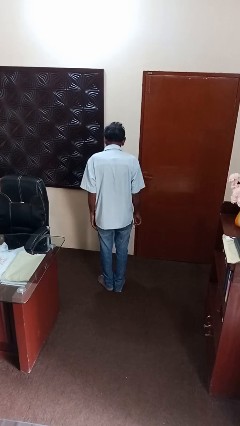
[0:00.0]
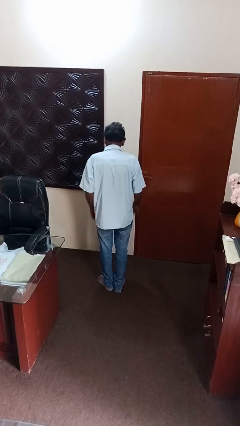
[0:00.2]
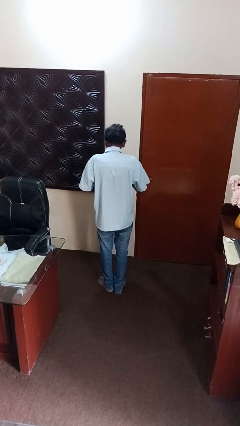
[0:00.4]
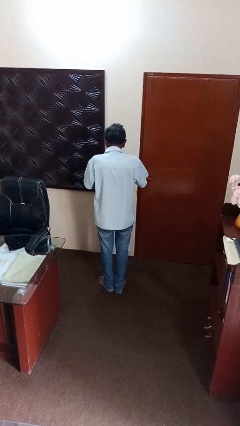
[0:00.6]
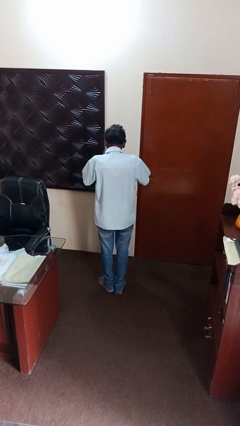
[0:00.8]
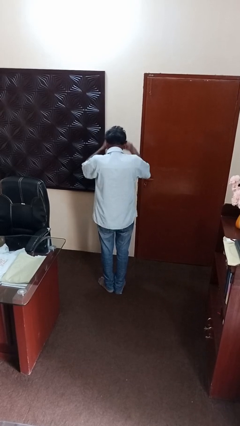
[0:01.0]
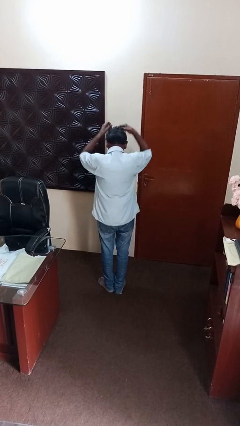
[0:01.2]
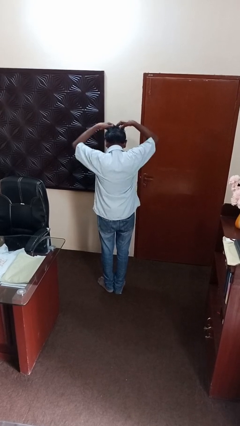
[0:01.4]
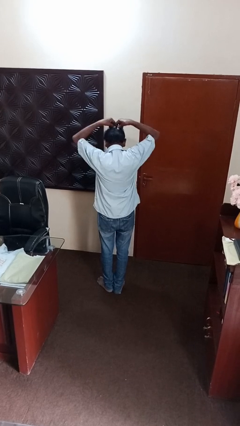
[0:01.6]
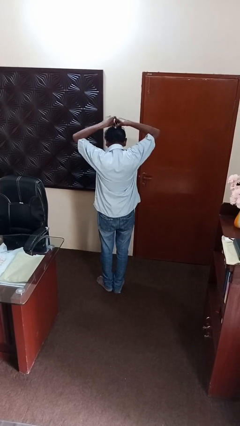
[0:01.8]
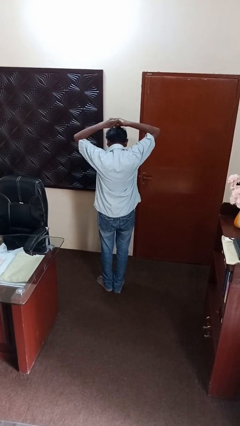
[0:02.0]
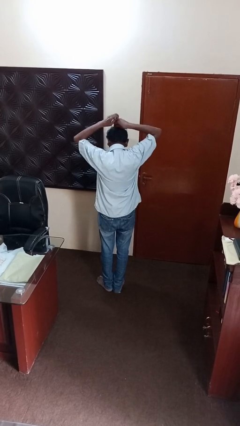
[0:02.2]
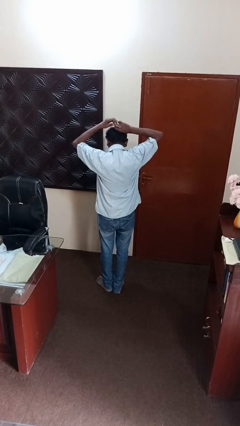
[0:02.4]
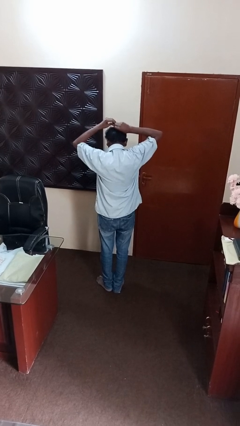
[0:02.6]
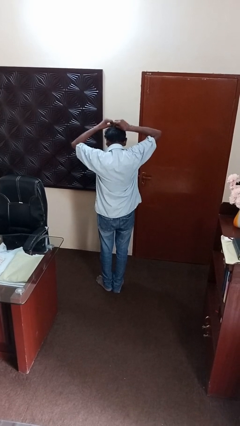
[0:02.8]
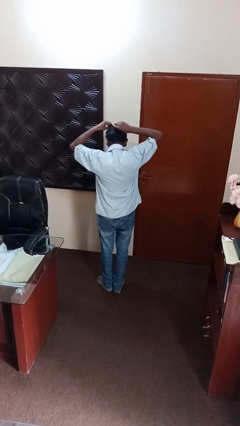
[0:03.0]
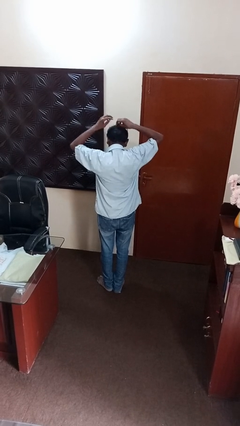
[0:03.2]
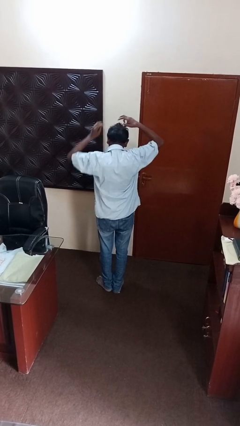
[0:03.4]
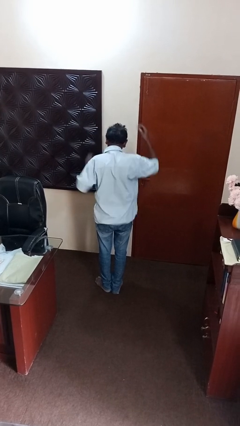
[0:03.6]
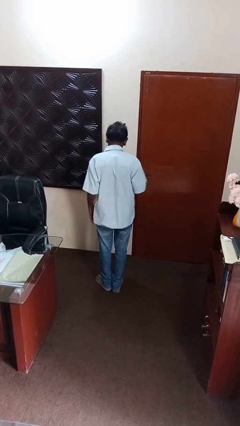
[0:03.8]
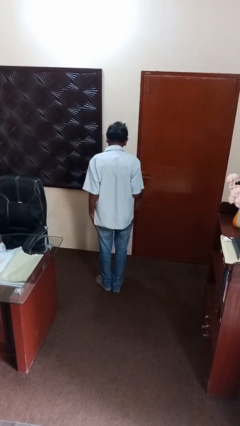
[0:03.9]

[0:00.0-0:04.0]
person puts hair in ponytail

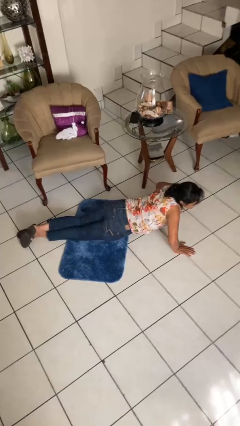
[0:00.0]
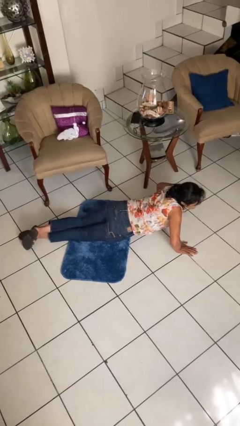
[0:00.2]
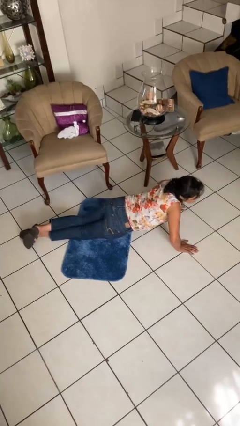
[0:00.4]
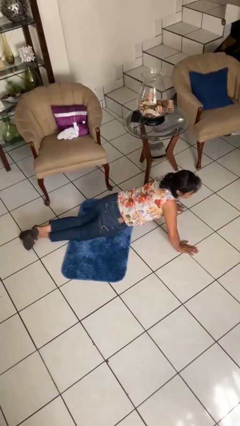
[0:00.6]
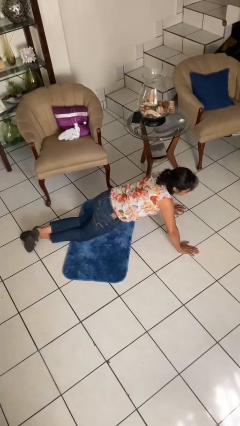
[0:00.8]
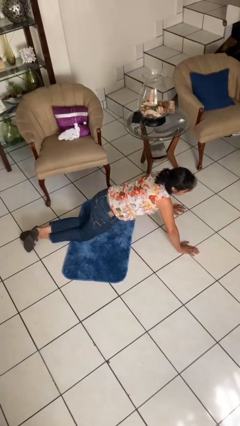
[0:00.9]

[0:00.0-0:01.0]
person exercises with pushup

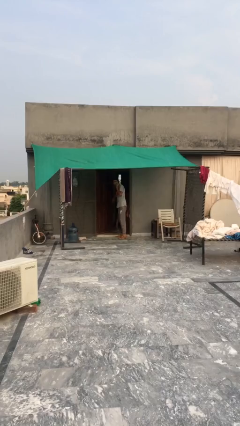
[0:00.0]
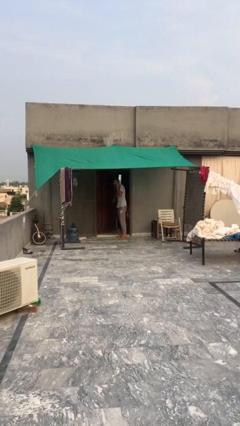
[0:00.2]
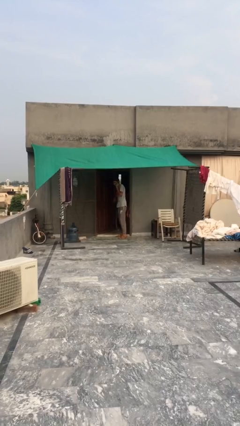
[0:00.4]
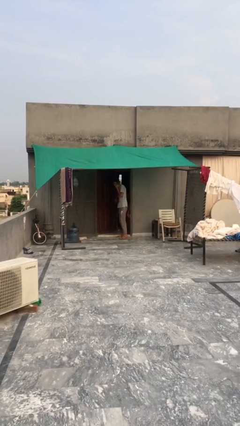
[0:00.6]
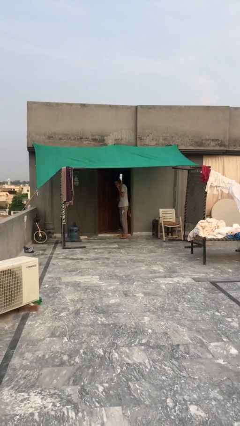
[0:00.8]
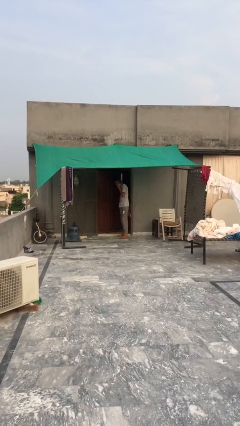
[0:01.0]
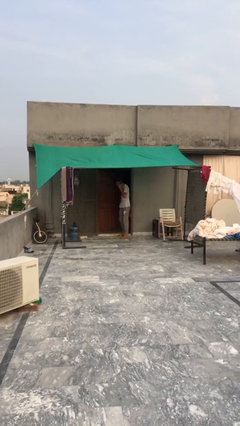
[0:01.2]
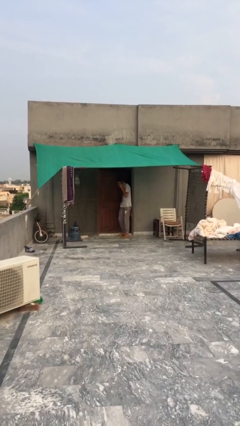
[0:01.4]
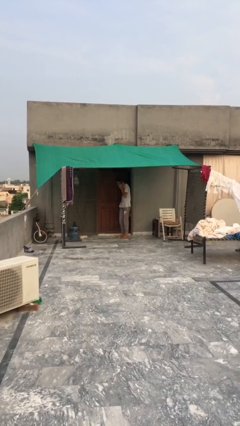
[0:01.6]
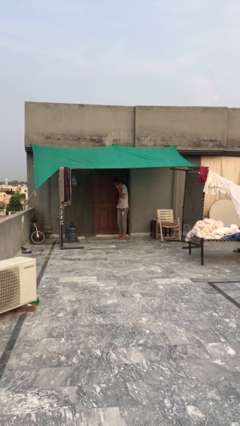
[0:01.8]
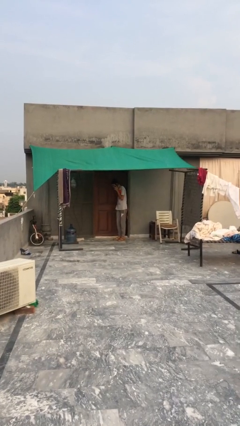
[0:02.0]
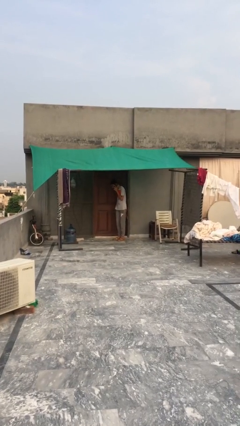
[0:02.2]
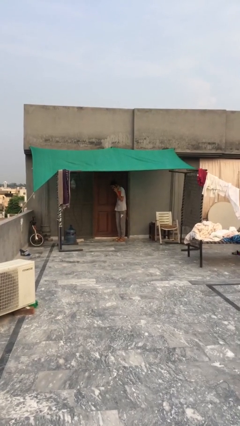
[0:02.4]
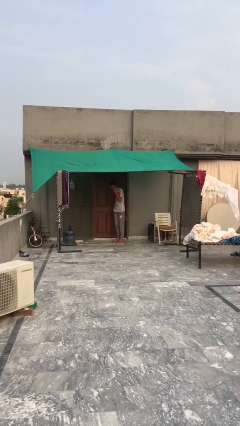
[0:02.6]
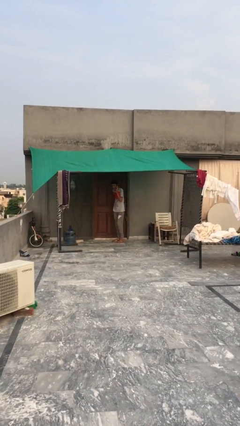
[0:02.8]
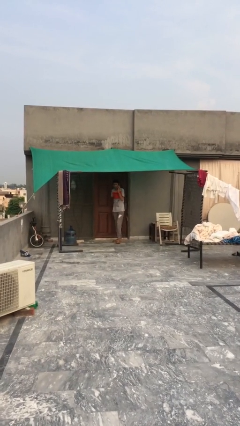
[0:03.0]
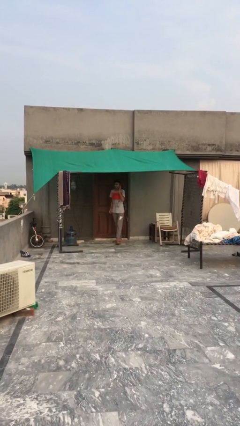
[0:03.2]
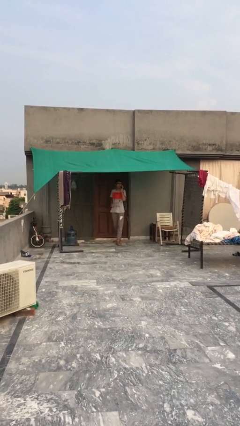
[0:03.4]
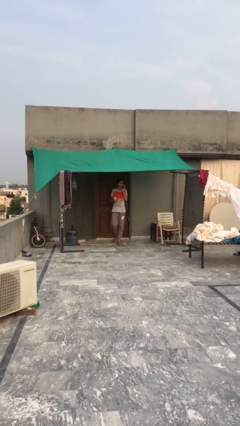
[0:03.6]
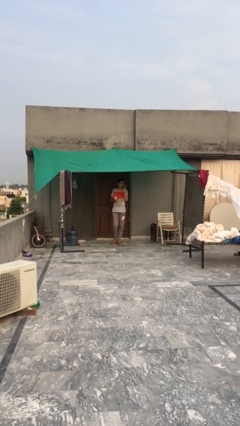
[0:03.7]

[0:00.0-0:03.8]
person closes facility door

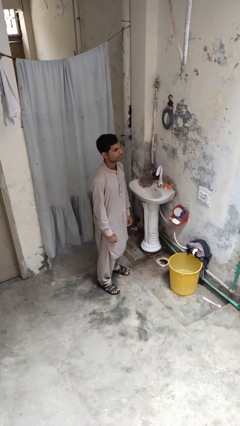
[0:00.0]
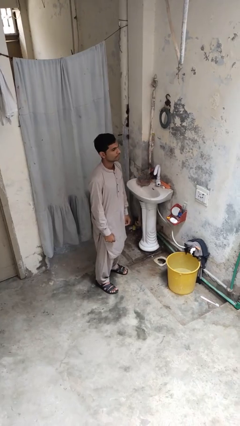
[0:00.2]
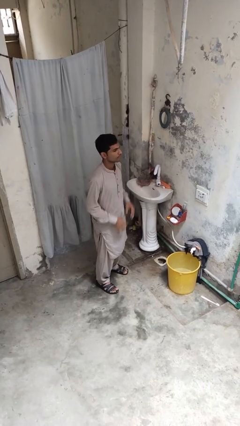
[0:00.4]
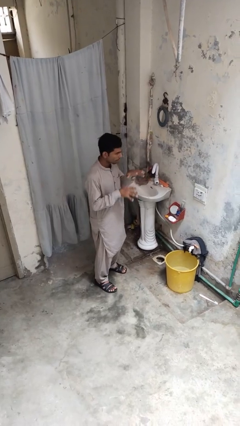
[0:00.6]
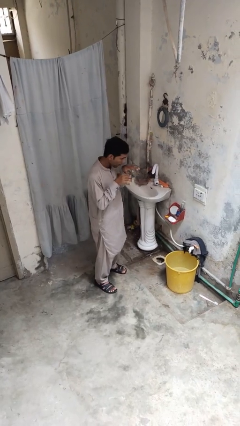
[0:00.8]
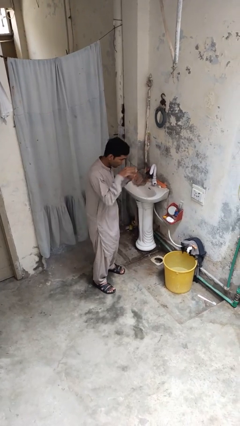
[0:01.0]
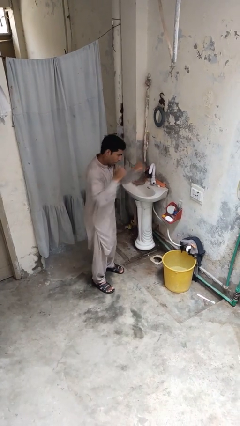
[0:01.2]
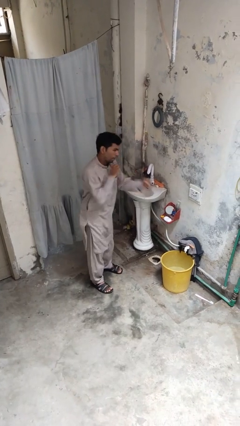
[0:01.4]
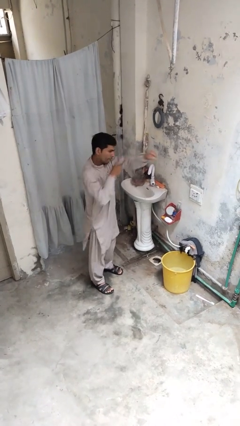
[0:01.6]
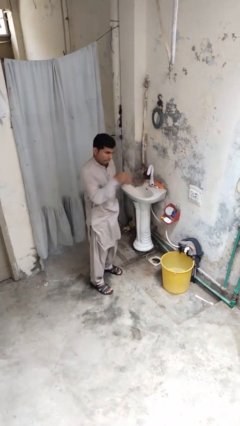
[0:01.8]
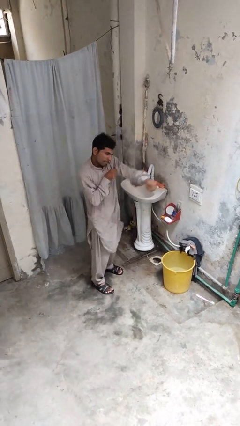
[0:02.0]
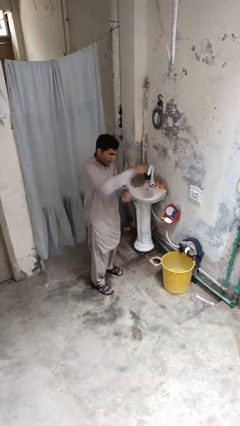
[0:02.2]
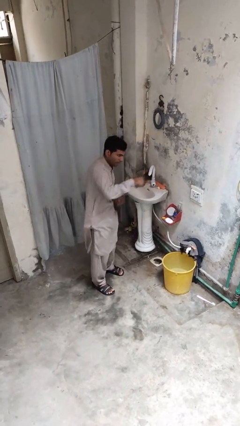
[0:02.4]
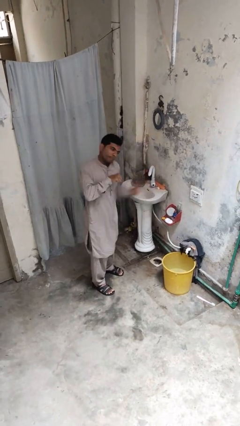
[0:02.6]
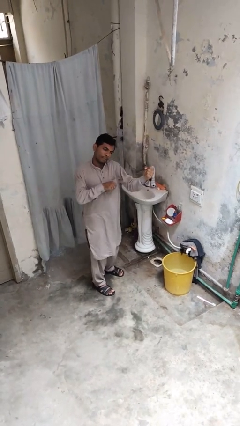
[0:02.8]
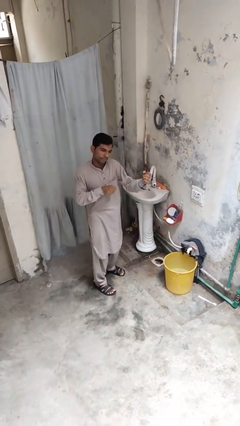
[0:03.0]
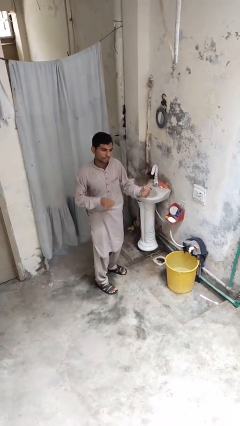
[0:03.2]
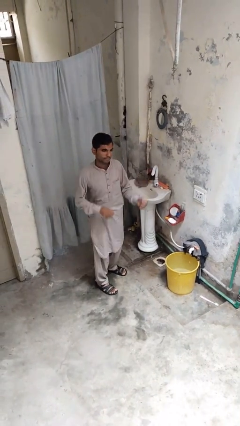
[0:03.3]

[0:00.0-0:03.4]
person punches

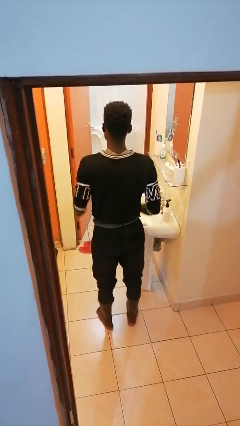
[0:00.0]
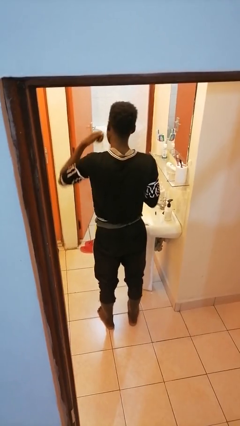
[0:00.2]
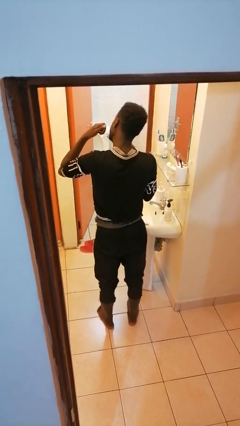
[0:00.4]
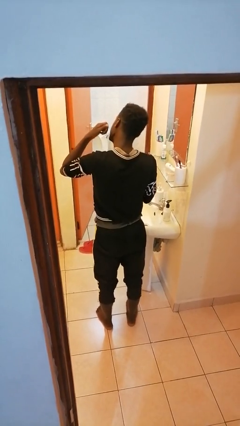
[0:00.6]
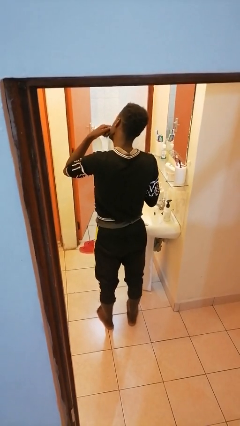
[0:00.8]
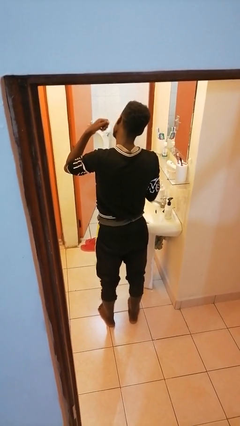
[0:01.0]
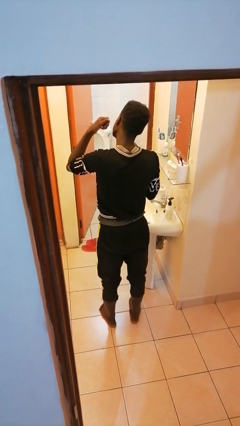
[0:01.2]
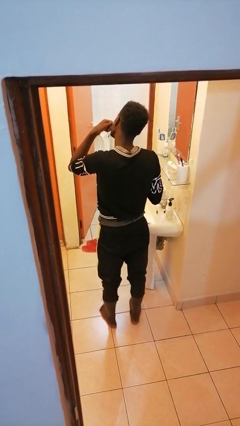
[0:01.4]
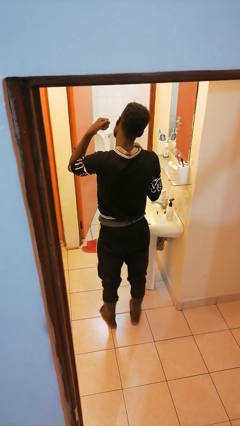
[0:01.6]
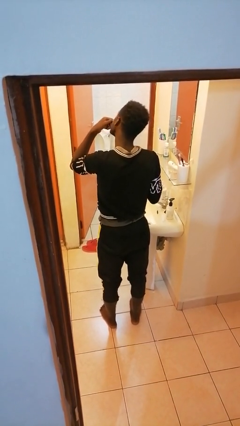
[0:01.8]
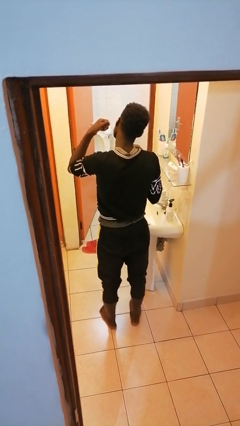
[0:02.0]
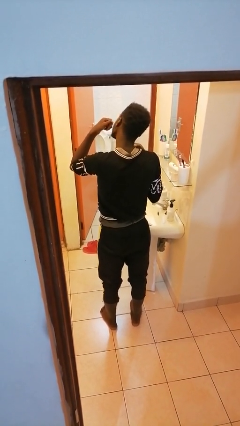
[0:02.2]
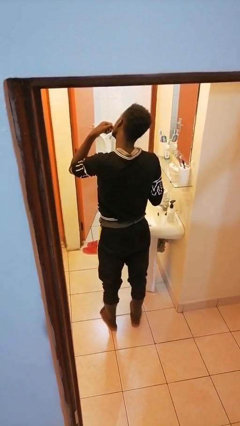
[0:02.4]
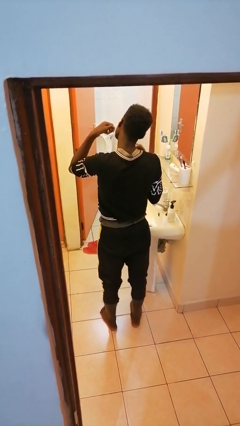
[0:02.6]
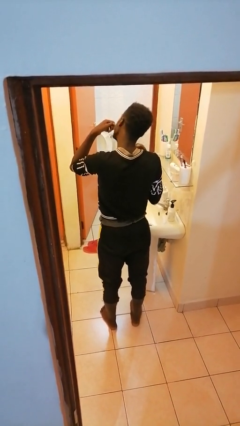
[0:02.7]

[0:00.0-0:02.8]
person flosses

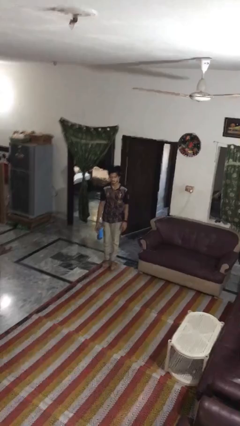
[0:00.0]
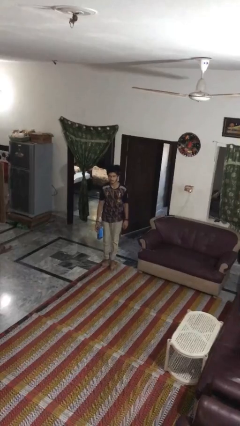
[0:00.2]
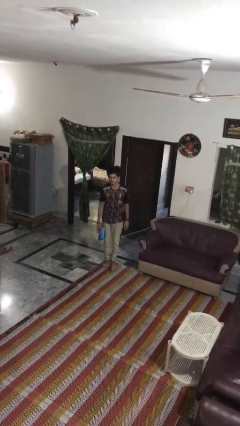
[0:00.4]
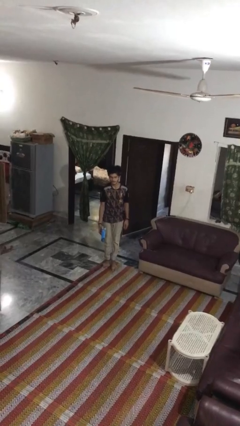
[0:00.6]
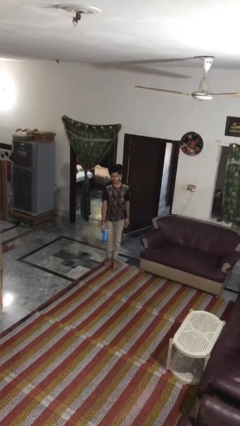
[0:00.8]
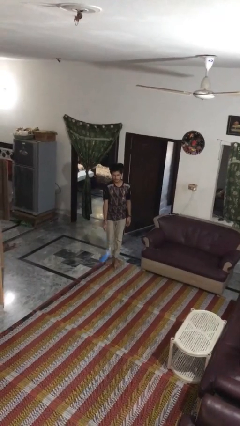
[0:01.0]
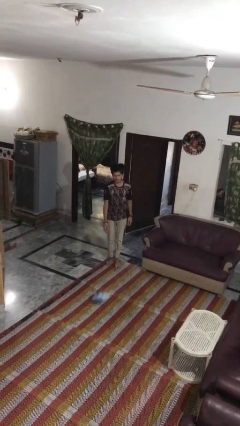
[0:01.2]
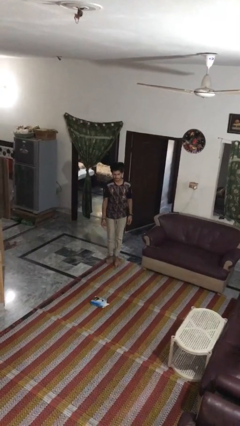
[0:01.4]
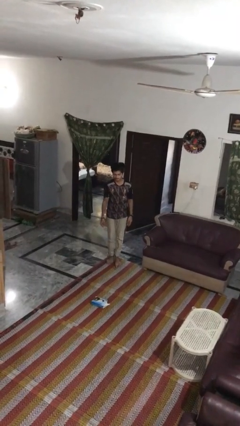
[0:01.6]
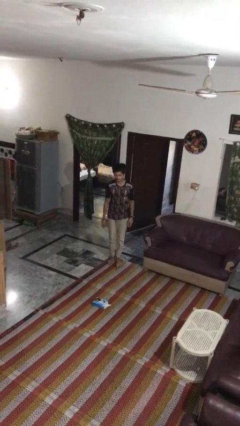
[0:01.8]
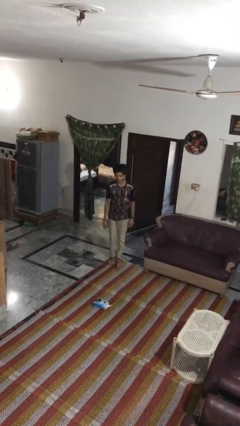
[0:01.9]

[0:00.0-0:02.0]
person throws object to ground
